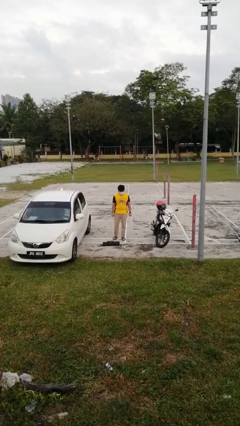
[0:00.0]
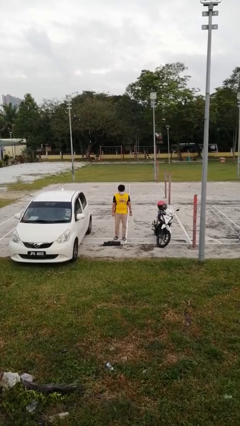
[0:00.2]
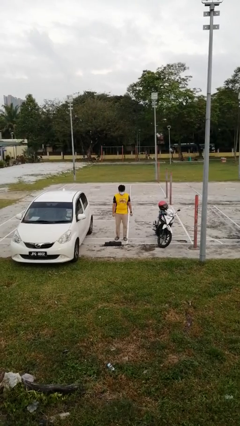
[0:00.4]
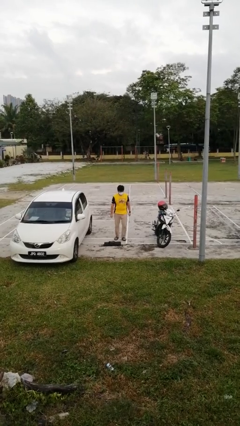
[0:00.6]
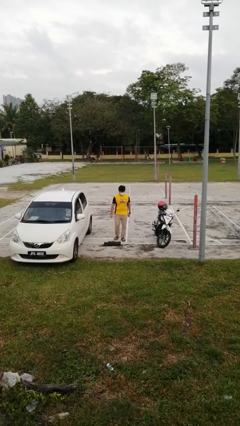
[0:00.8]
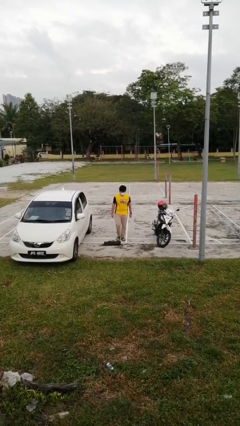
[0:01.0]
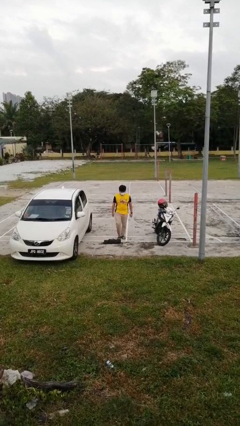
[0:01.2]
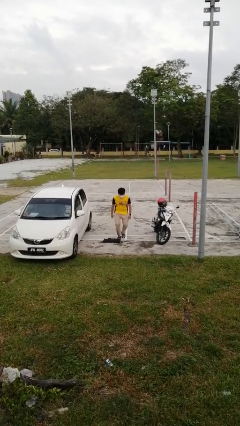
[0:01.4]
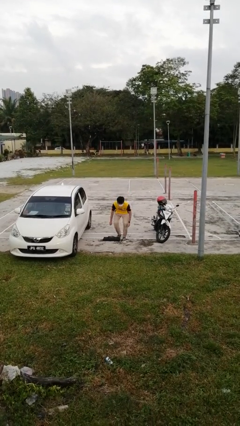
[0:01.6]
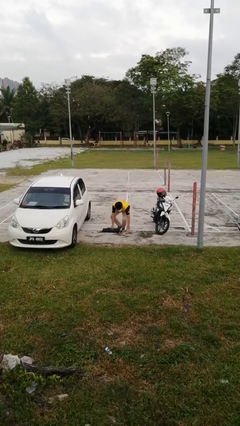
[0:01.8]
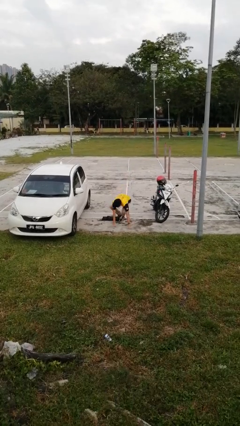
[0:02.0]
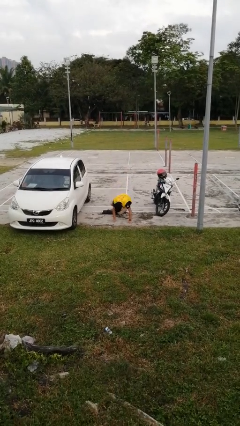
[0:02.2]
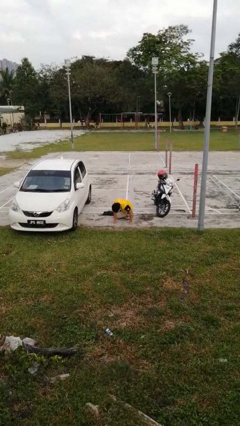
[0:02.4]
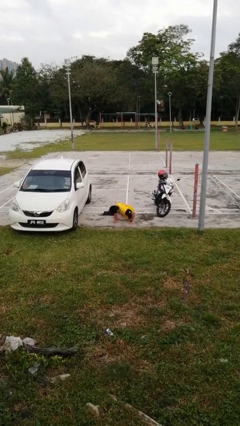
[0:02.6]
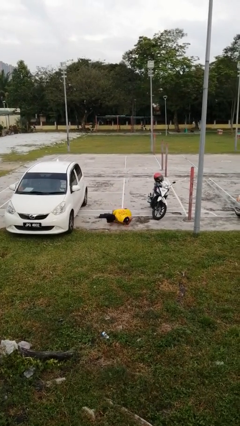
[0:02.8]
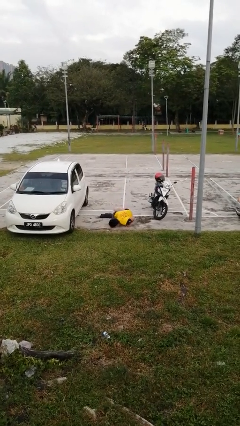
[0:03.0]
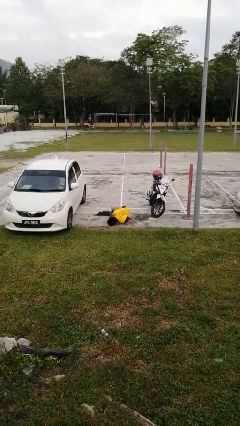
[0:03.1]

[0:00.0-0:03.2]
person trips on object on floor

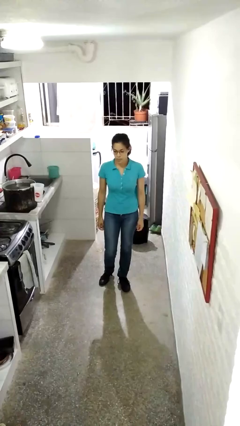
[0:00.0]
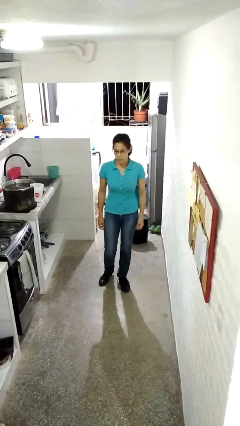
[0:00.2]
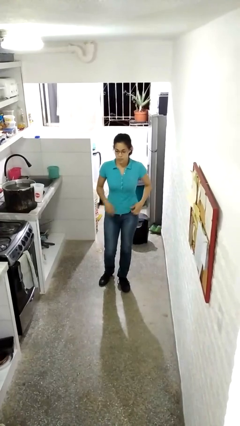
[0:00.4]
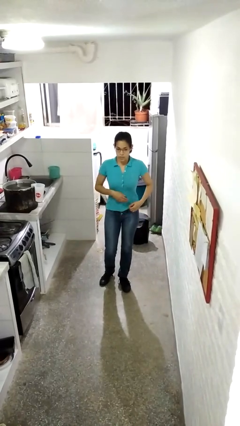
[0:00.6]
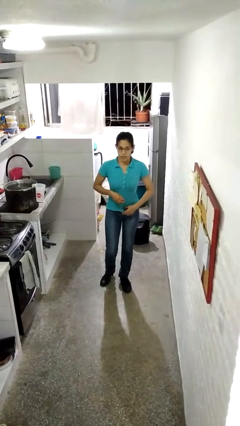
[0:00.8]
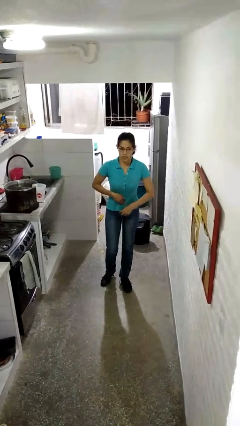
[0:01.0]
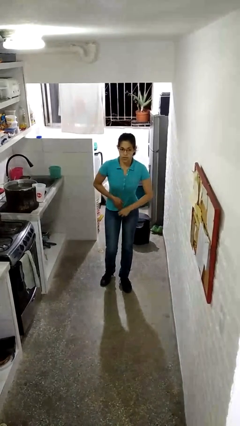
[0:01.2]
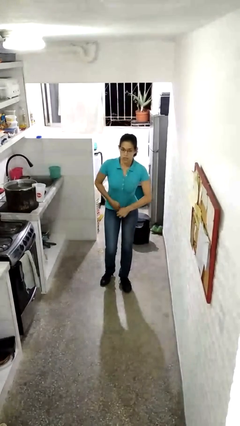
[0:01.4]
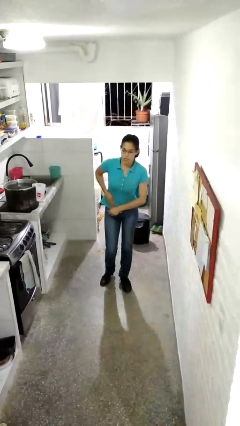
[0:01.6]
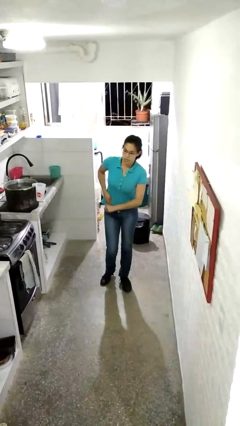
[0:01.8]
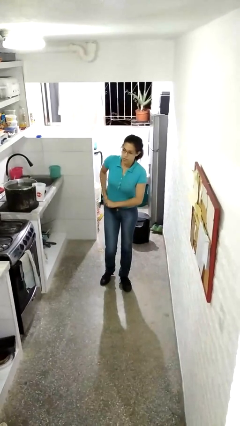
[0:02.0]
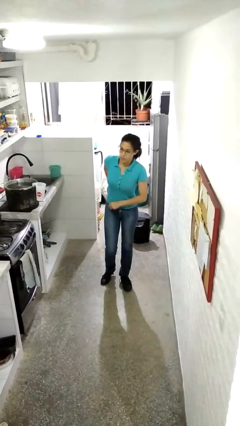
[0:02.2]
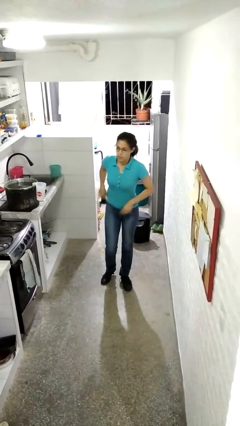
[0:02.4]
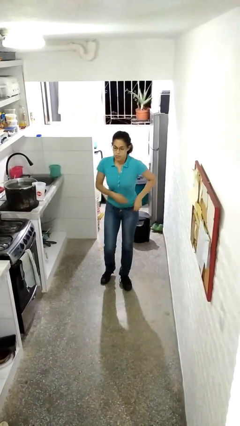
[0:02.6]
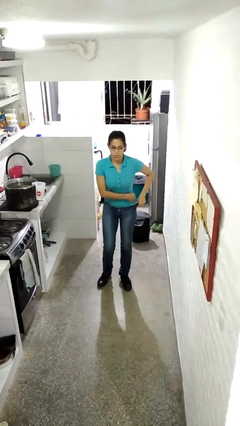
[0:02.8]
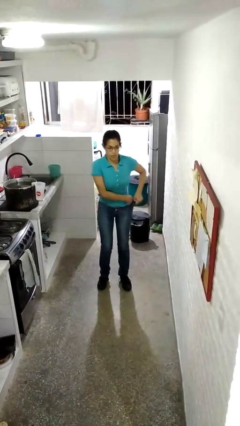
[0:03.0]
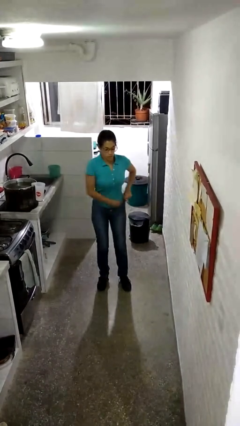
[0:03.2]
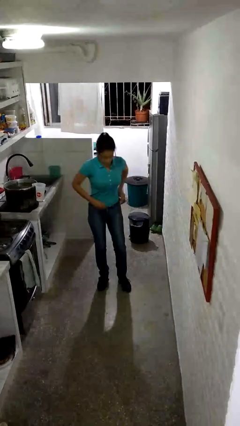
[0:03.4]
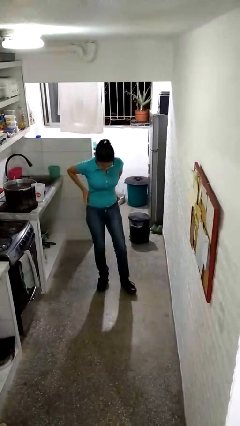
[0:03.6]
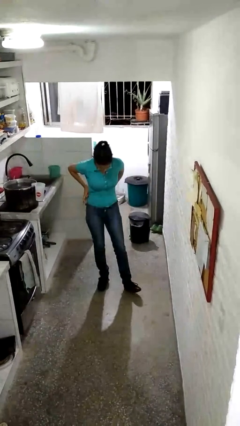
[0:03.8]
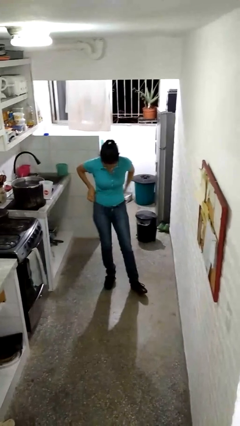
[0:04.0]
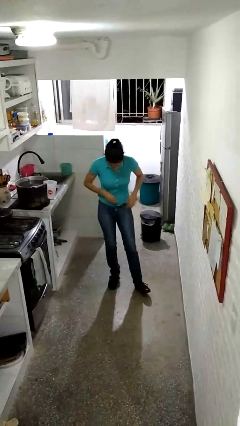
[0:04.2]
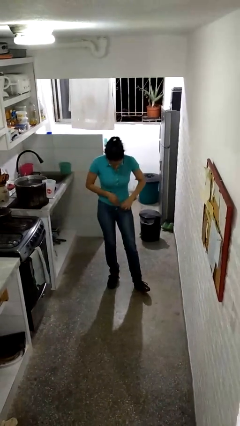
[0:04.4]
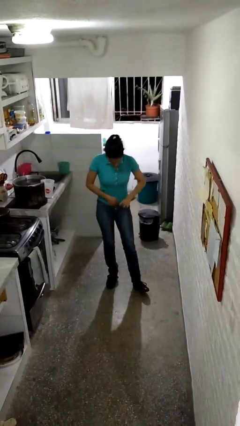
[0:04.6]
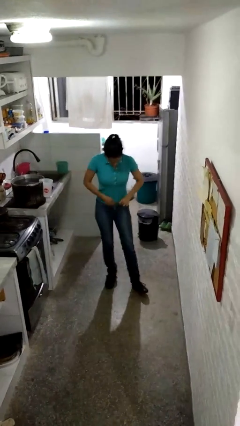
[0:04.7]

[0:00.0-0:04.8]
person tucks in shirt

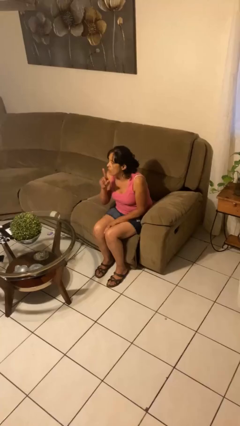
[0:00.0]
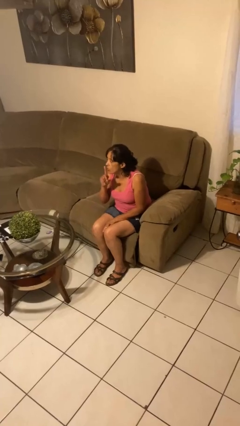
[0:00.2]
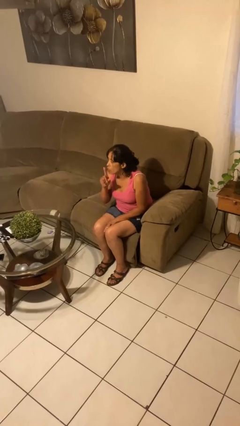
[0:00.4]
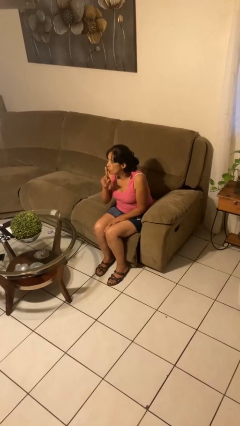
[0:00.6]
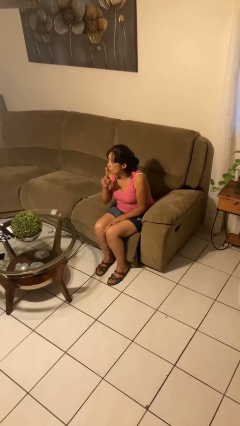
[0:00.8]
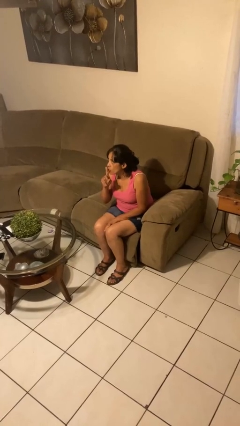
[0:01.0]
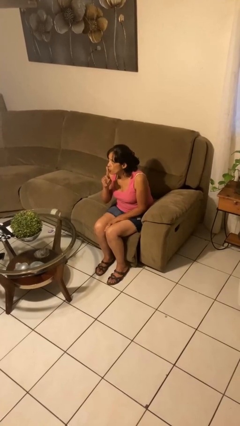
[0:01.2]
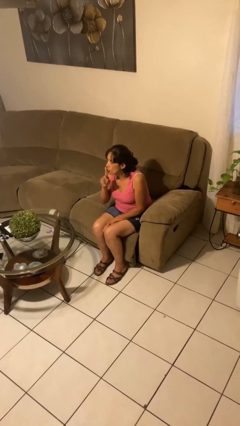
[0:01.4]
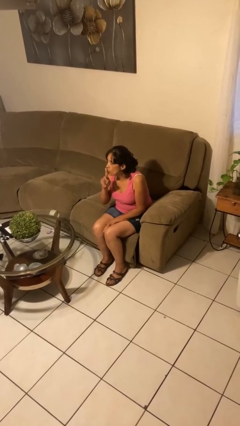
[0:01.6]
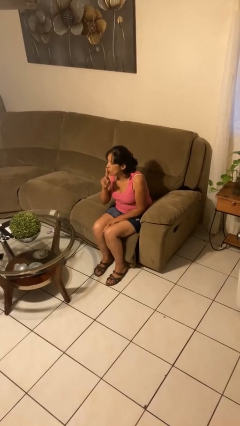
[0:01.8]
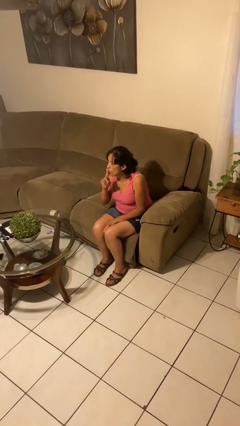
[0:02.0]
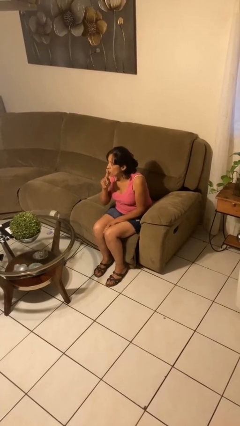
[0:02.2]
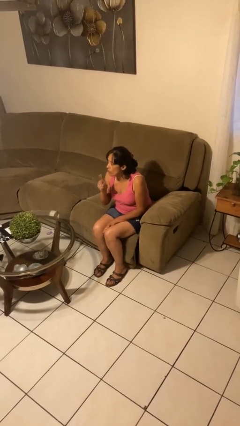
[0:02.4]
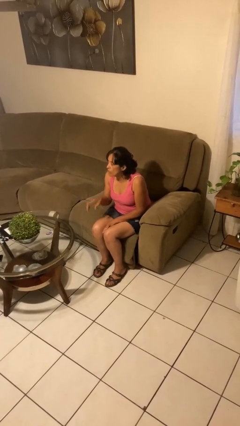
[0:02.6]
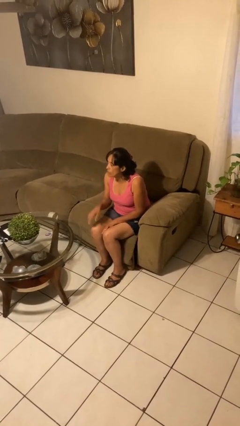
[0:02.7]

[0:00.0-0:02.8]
person gestures be quiet

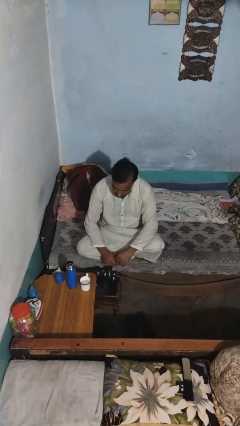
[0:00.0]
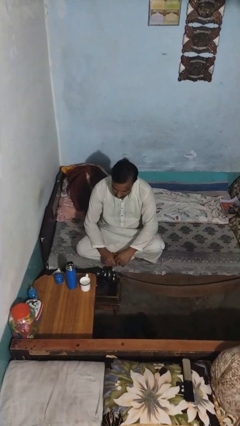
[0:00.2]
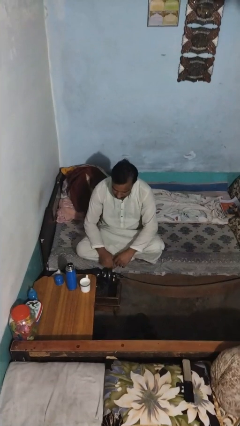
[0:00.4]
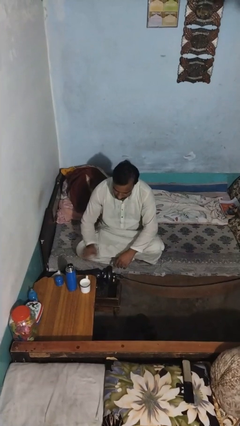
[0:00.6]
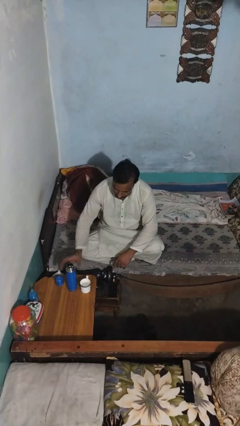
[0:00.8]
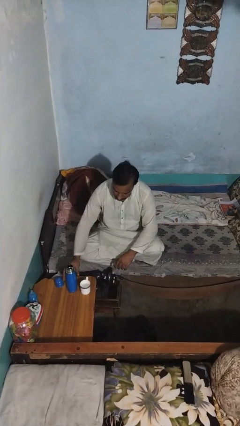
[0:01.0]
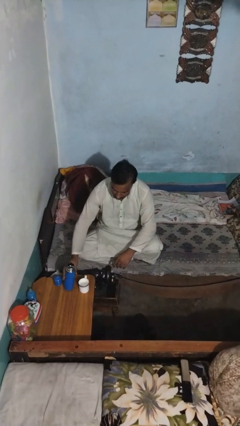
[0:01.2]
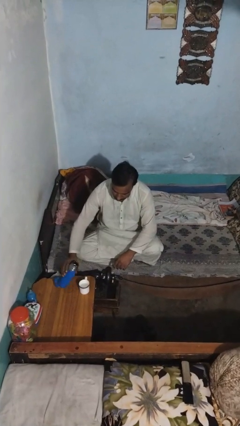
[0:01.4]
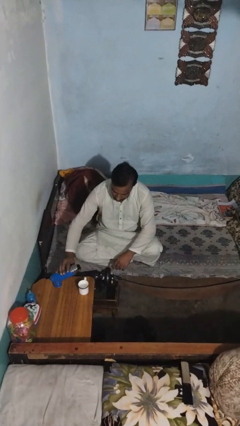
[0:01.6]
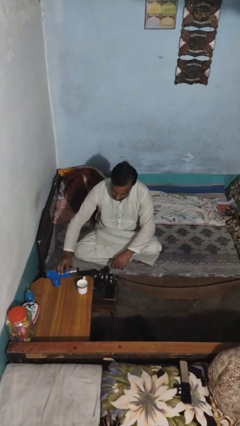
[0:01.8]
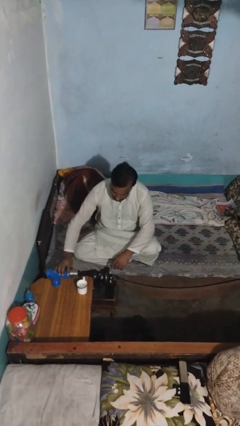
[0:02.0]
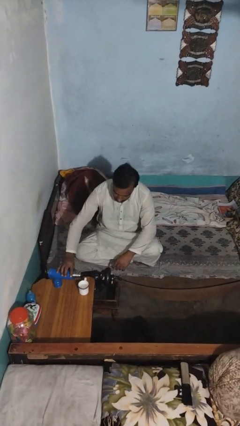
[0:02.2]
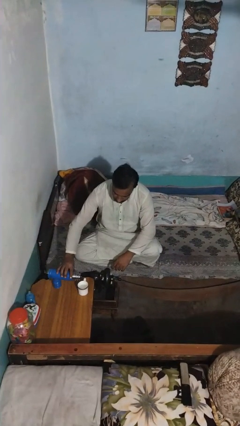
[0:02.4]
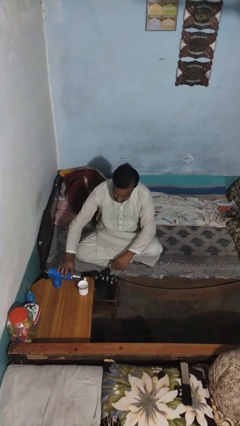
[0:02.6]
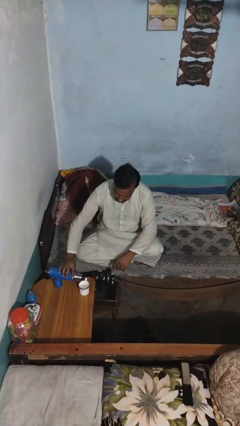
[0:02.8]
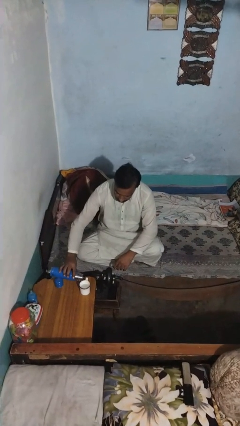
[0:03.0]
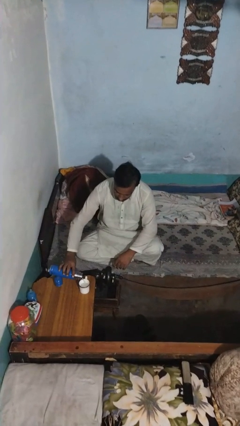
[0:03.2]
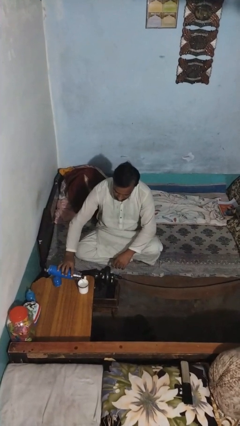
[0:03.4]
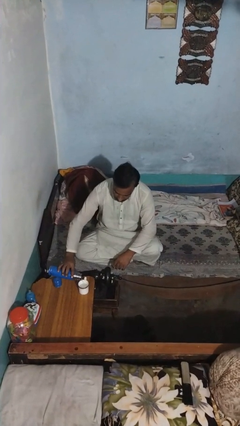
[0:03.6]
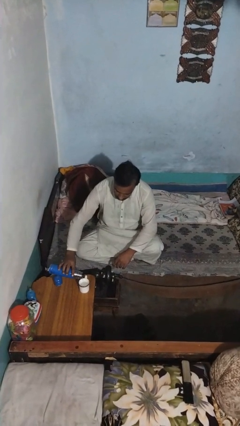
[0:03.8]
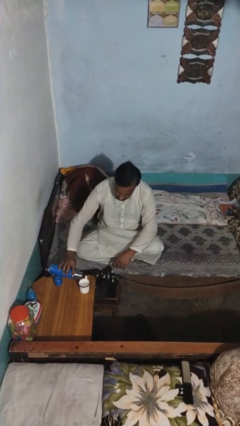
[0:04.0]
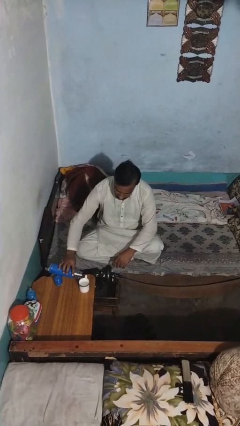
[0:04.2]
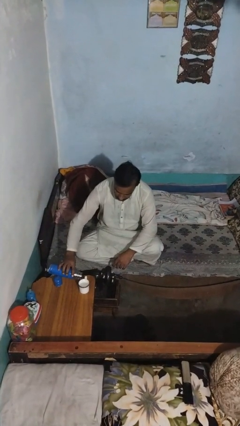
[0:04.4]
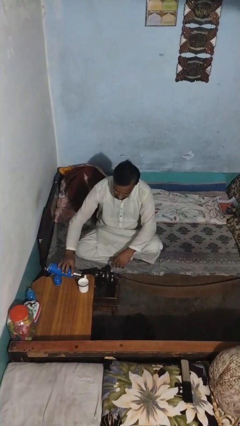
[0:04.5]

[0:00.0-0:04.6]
person pours liquid into cup

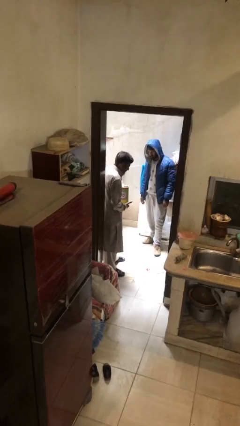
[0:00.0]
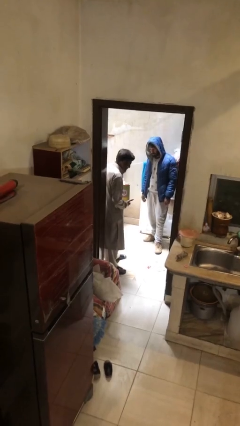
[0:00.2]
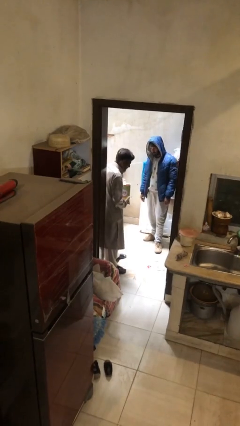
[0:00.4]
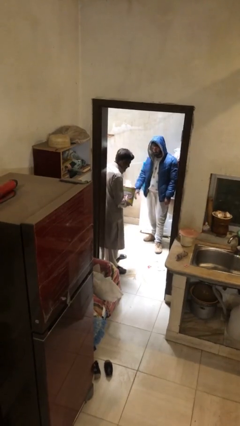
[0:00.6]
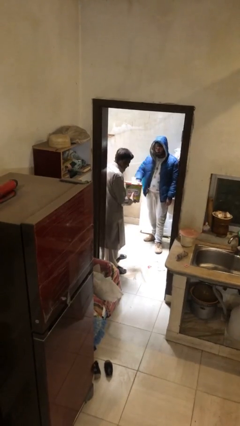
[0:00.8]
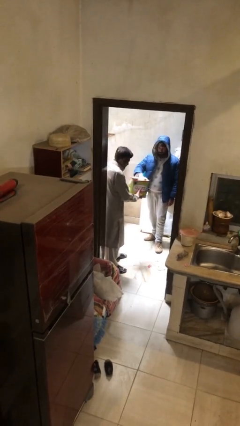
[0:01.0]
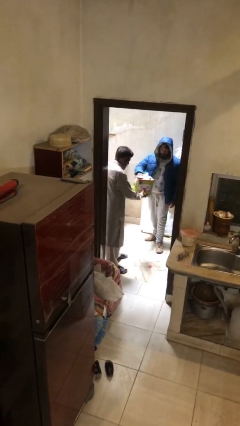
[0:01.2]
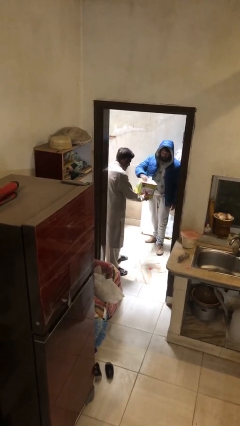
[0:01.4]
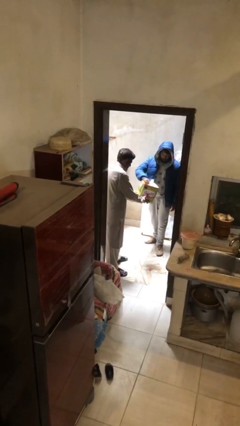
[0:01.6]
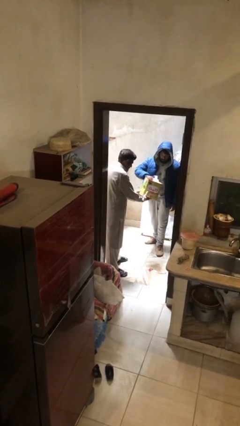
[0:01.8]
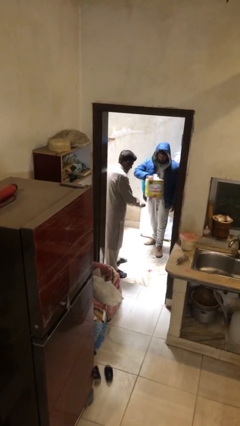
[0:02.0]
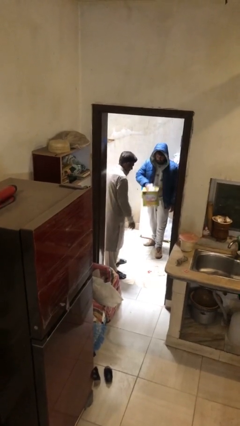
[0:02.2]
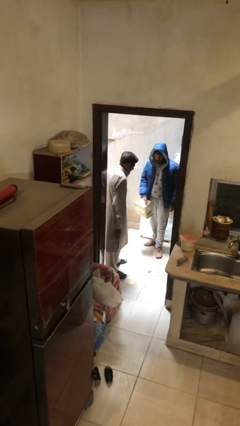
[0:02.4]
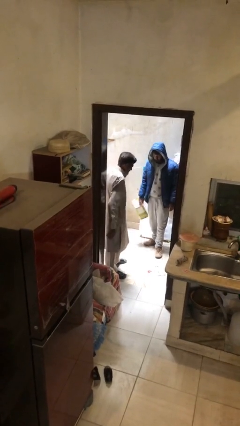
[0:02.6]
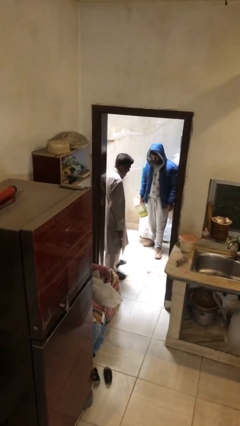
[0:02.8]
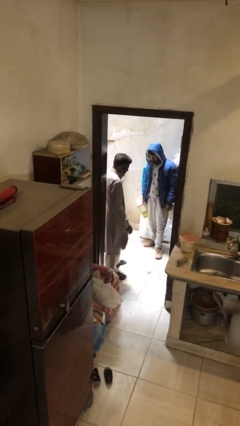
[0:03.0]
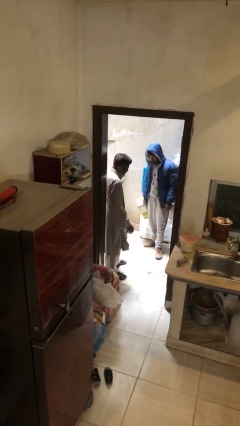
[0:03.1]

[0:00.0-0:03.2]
person transfers object to person
